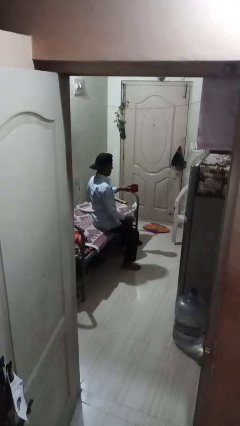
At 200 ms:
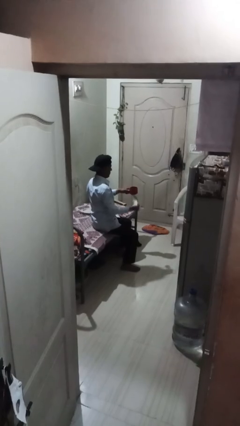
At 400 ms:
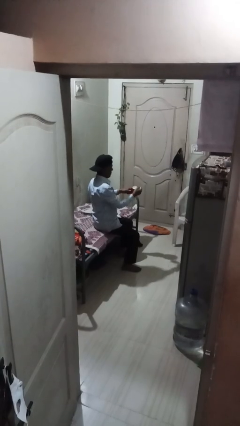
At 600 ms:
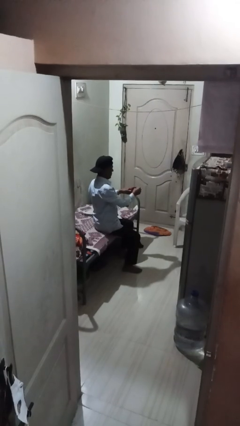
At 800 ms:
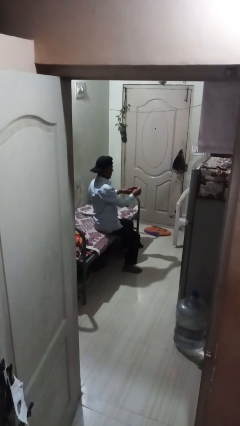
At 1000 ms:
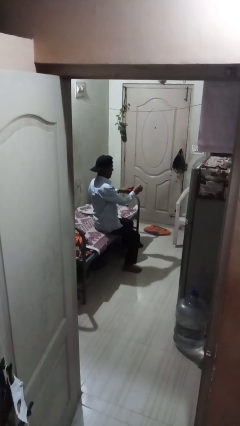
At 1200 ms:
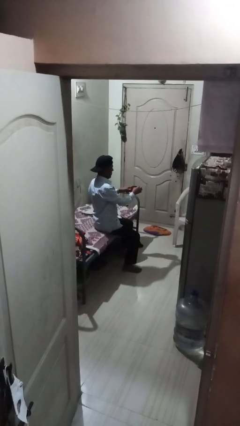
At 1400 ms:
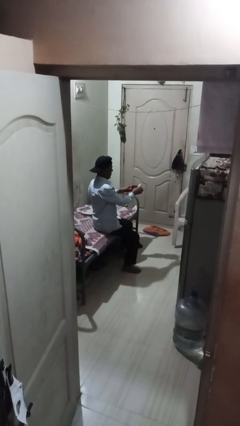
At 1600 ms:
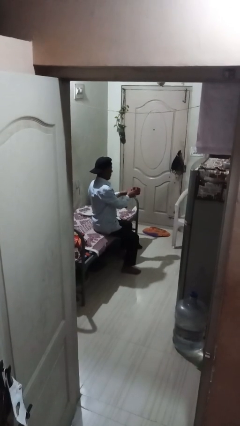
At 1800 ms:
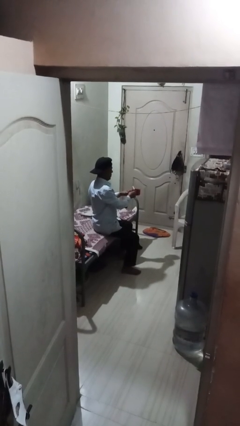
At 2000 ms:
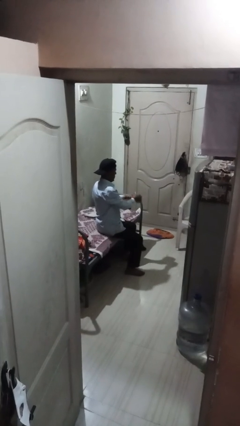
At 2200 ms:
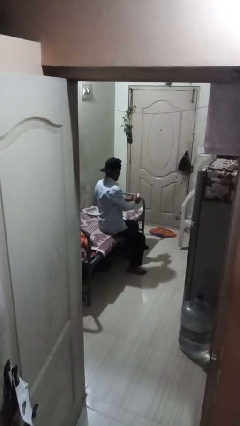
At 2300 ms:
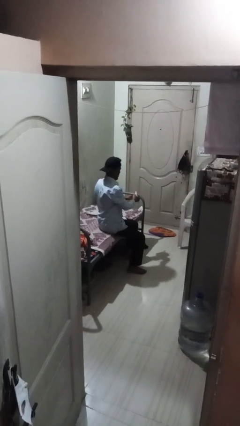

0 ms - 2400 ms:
person stirs mug

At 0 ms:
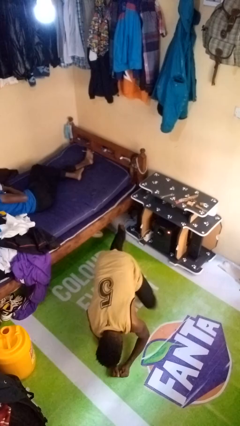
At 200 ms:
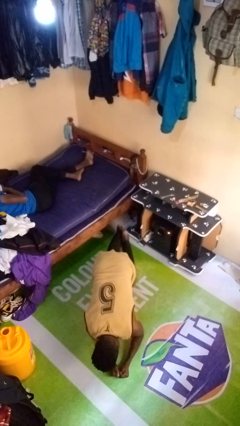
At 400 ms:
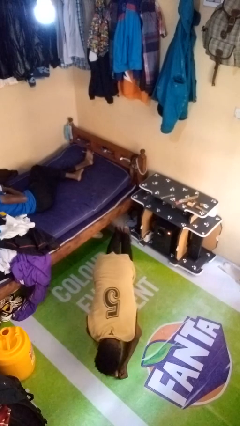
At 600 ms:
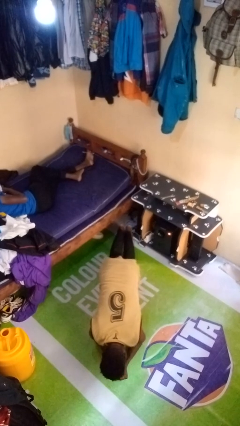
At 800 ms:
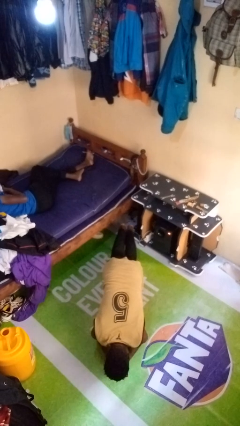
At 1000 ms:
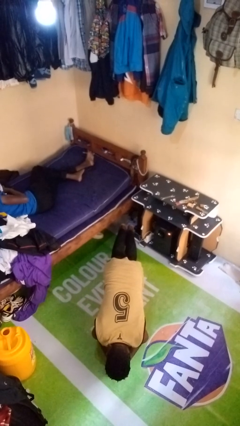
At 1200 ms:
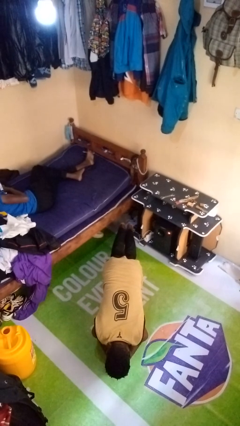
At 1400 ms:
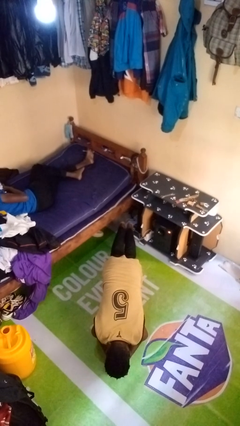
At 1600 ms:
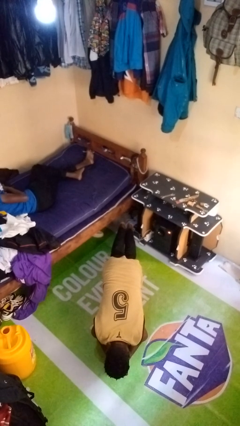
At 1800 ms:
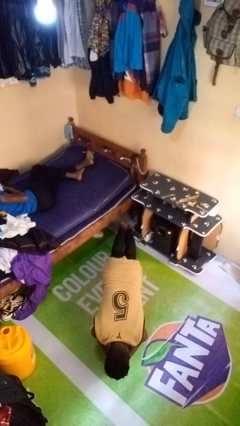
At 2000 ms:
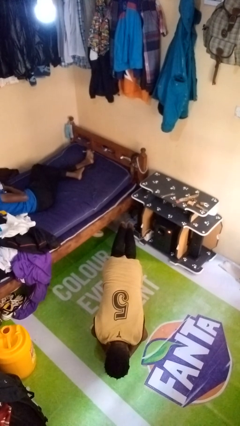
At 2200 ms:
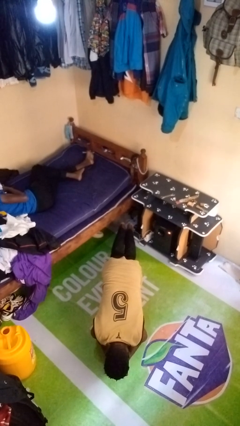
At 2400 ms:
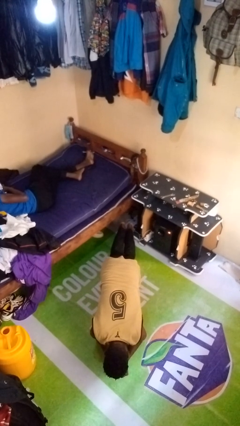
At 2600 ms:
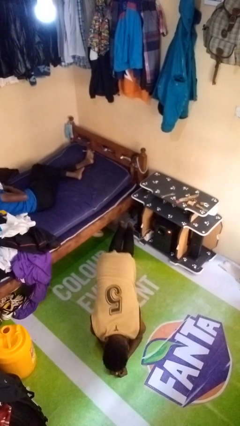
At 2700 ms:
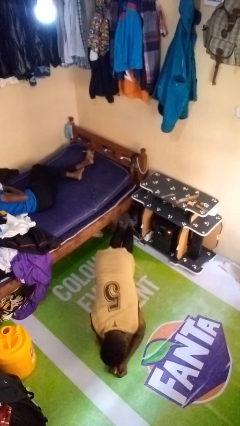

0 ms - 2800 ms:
person exercises with plank

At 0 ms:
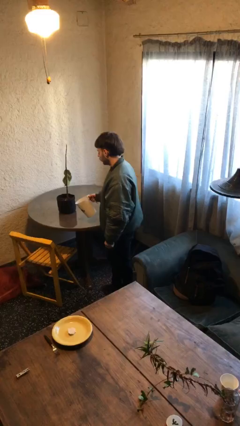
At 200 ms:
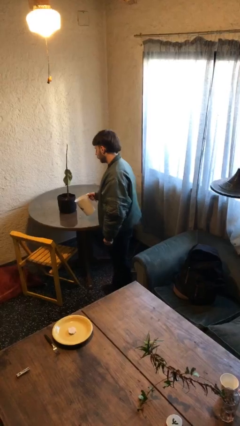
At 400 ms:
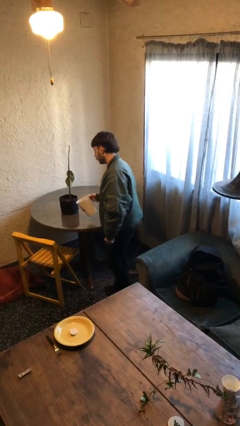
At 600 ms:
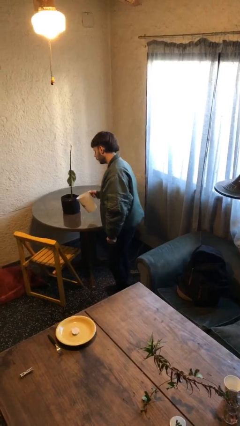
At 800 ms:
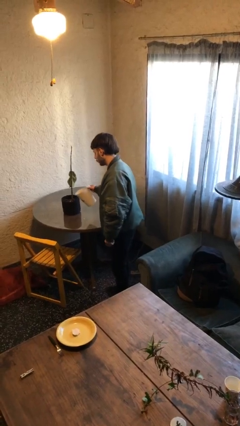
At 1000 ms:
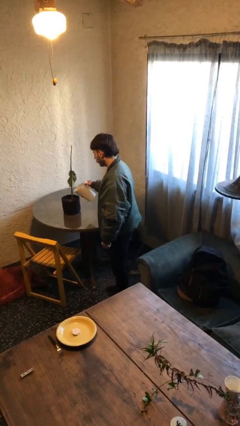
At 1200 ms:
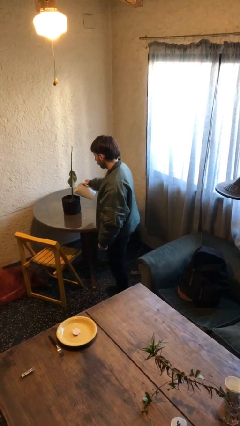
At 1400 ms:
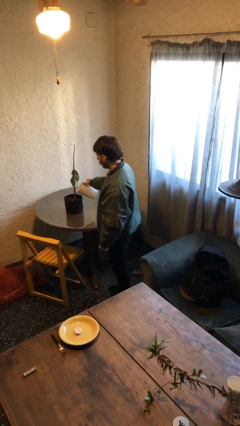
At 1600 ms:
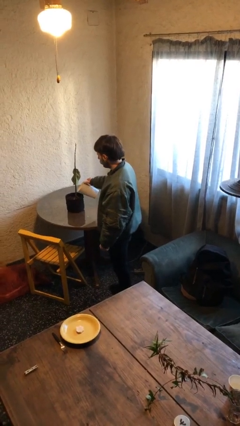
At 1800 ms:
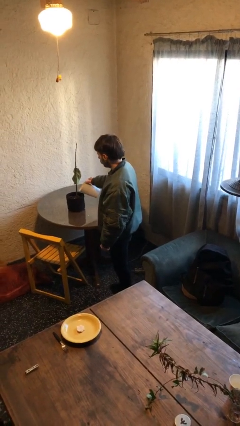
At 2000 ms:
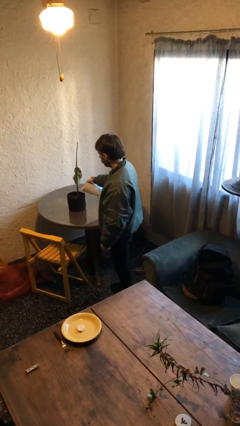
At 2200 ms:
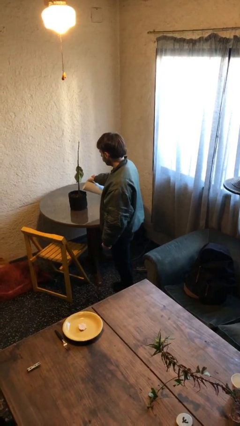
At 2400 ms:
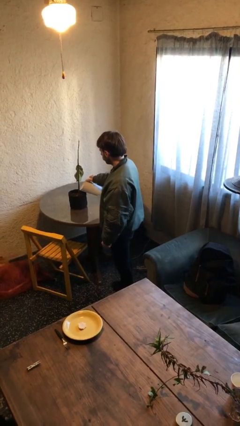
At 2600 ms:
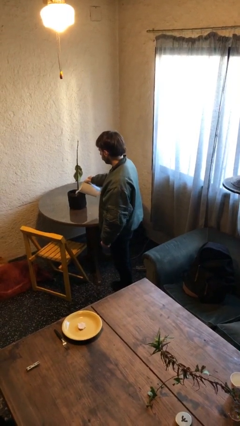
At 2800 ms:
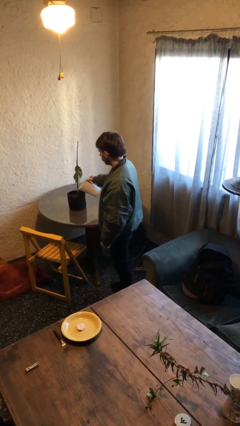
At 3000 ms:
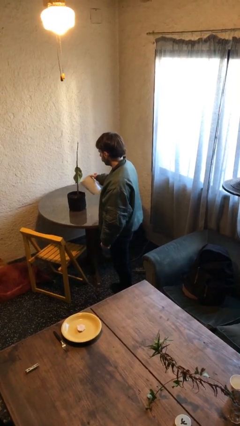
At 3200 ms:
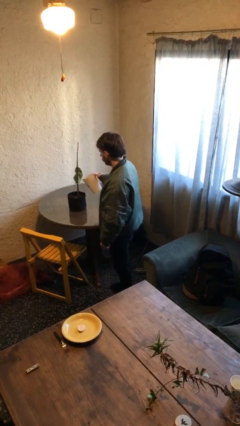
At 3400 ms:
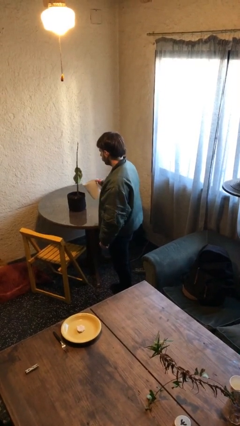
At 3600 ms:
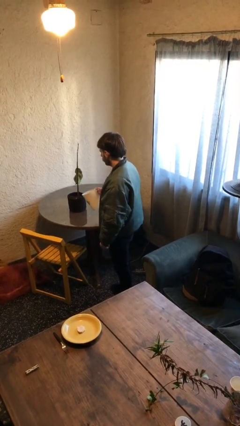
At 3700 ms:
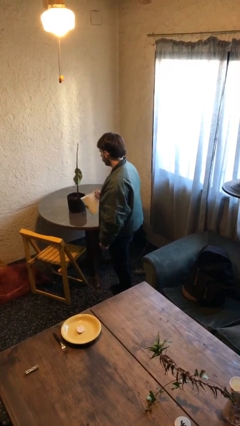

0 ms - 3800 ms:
person waters houseplant

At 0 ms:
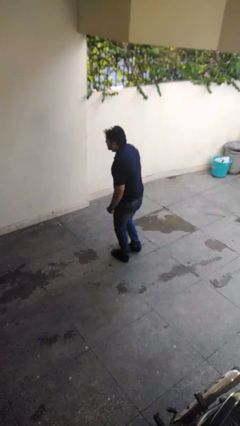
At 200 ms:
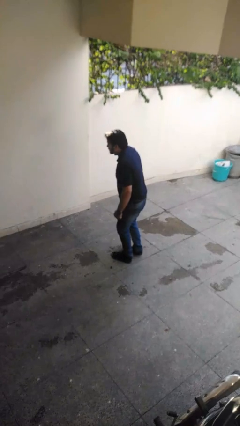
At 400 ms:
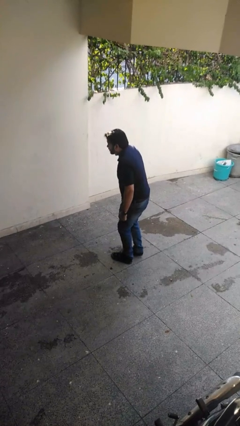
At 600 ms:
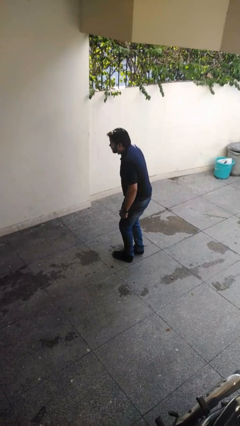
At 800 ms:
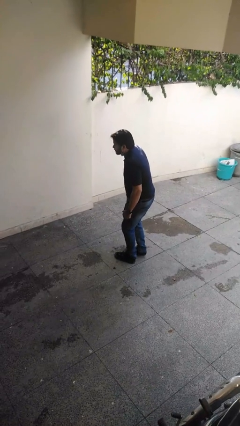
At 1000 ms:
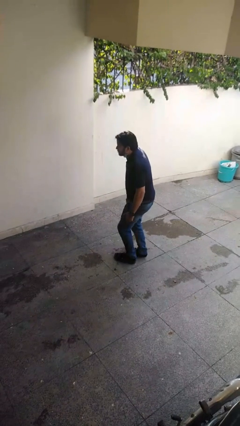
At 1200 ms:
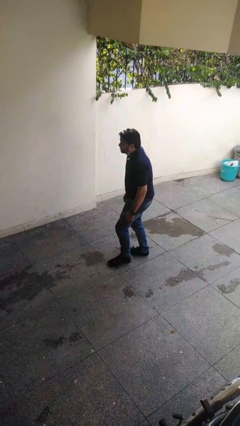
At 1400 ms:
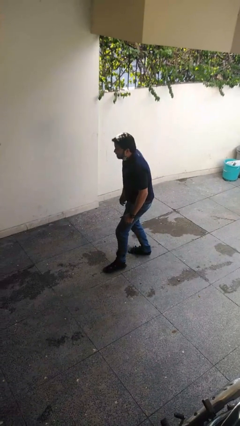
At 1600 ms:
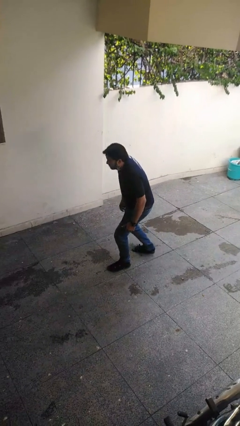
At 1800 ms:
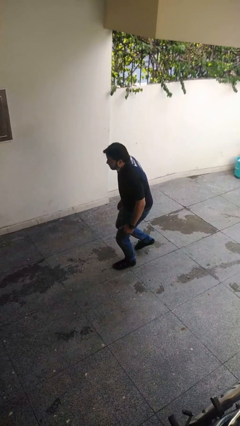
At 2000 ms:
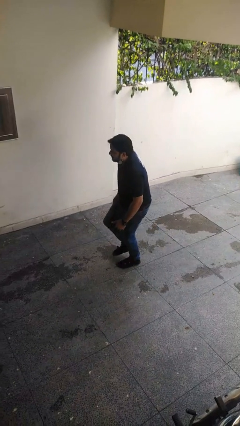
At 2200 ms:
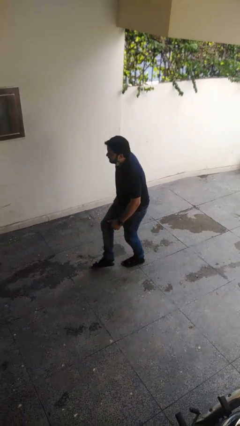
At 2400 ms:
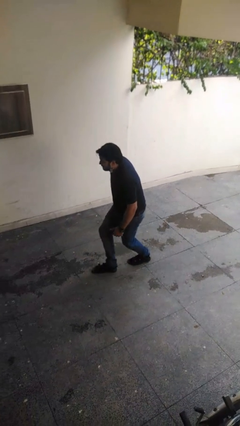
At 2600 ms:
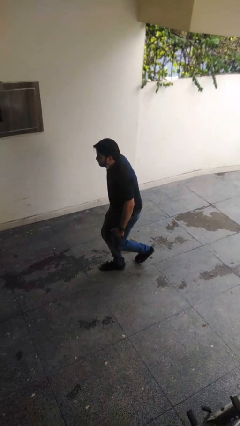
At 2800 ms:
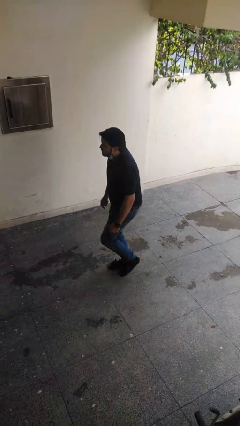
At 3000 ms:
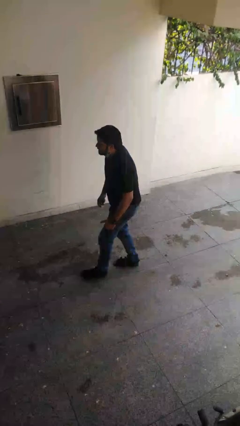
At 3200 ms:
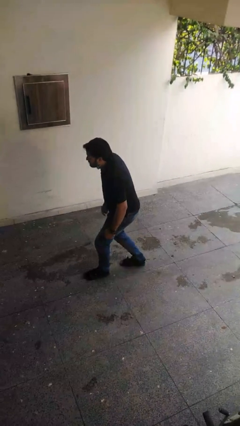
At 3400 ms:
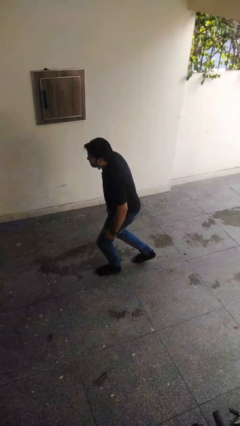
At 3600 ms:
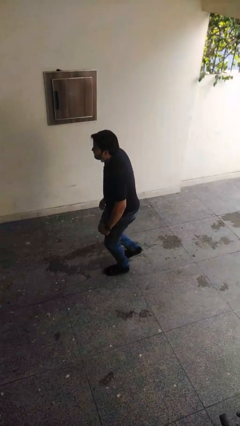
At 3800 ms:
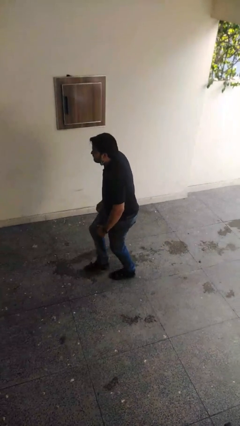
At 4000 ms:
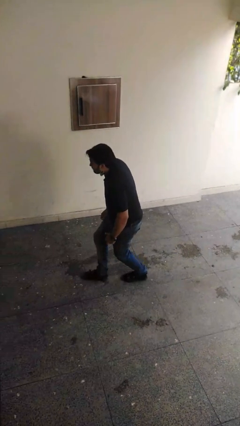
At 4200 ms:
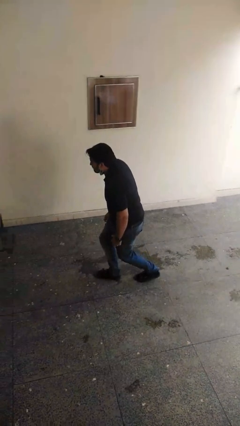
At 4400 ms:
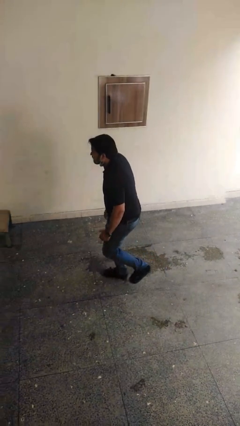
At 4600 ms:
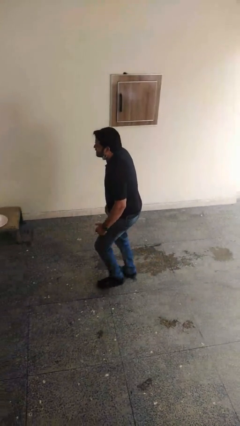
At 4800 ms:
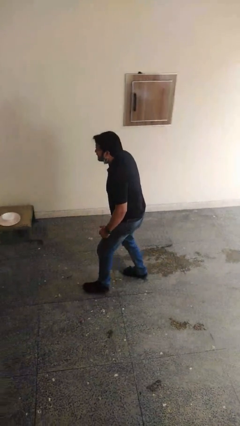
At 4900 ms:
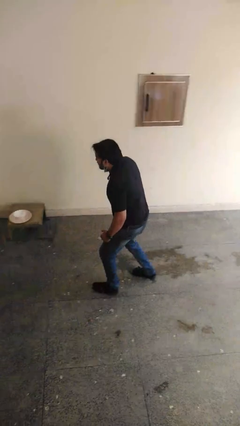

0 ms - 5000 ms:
person walks tiptoe

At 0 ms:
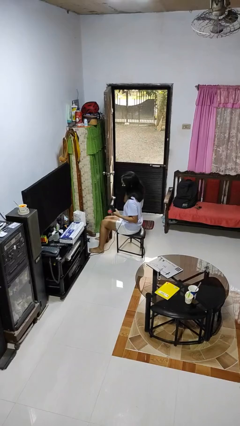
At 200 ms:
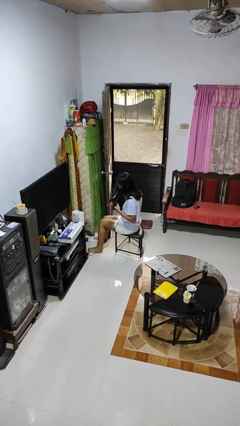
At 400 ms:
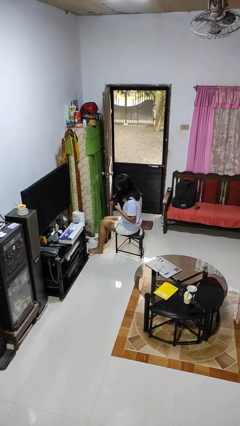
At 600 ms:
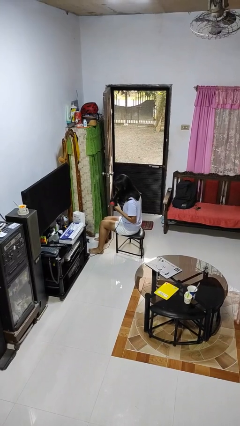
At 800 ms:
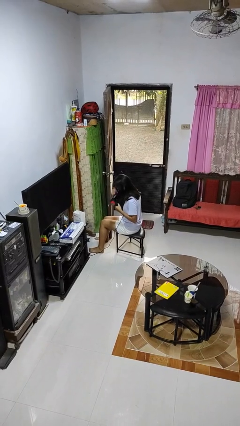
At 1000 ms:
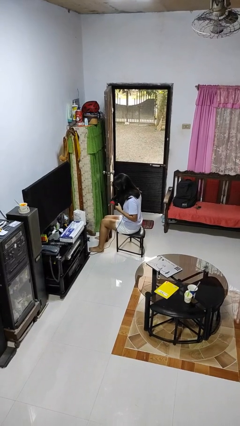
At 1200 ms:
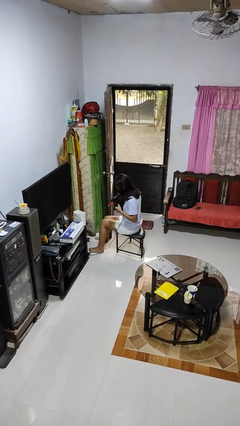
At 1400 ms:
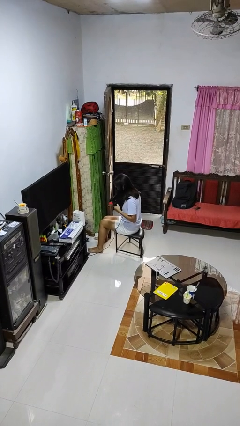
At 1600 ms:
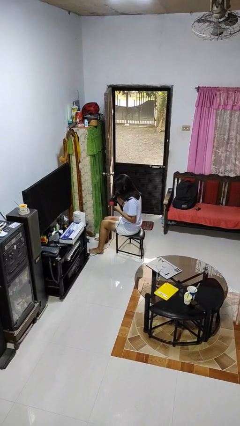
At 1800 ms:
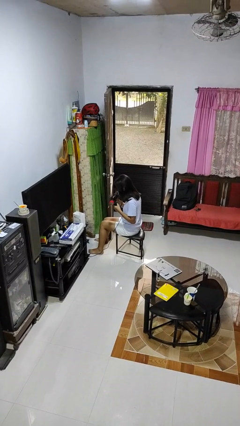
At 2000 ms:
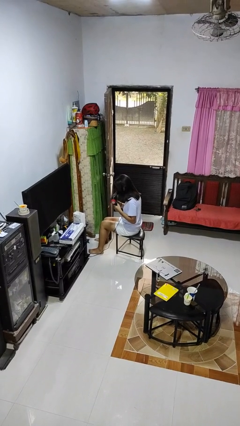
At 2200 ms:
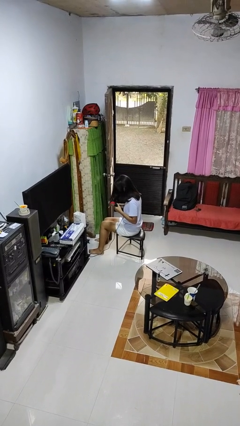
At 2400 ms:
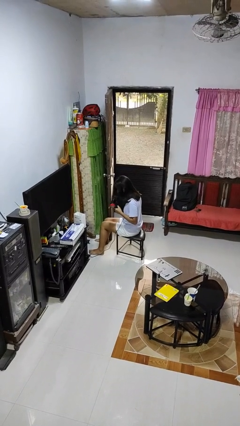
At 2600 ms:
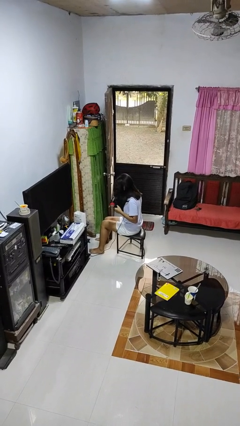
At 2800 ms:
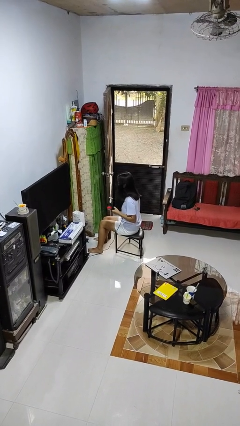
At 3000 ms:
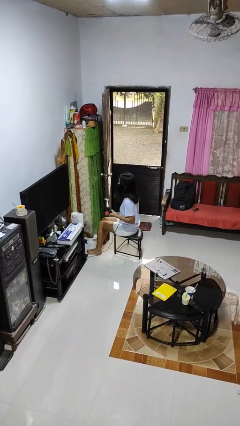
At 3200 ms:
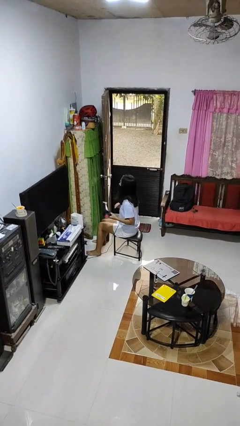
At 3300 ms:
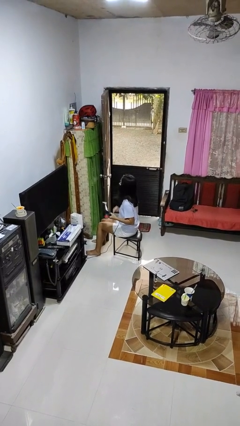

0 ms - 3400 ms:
person dries hair with hairdryer
